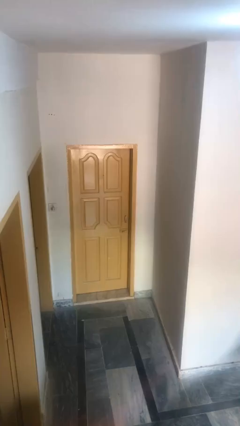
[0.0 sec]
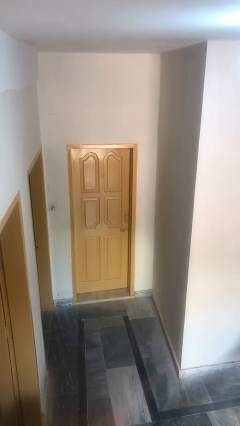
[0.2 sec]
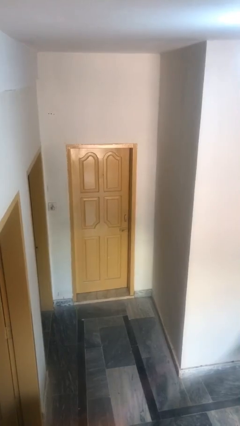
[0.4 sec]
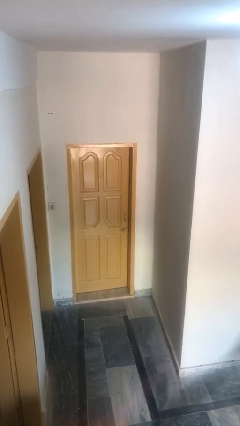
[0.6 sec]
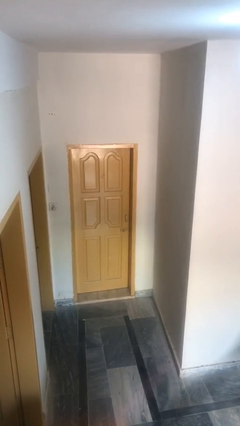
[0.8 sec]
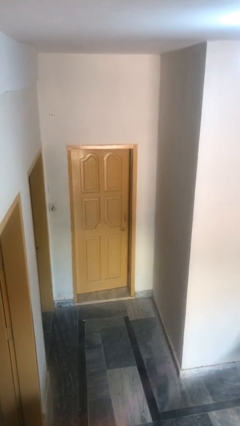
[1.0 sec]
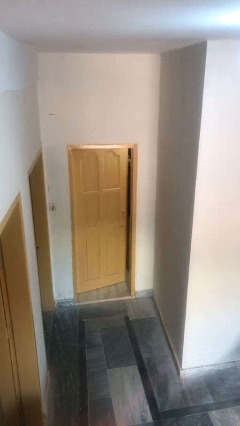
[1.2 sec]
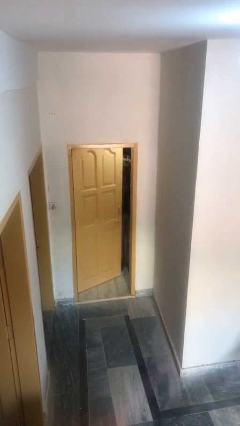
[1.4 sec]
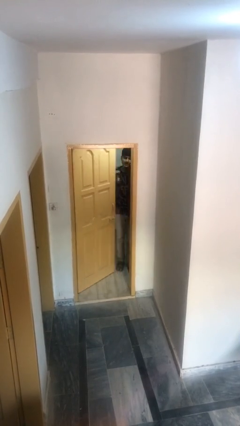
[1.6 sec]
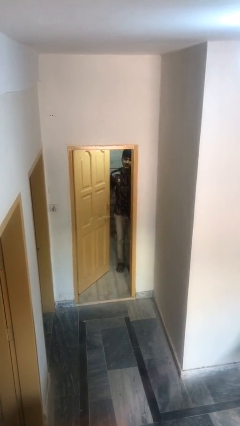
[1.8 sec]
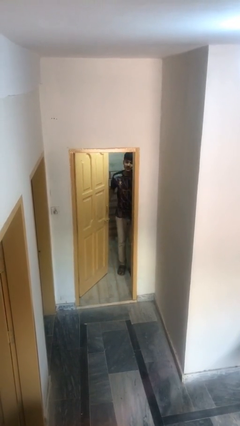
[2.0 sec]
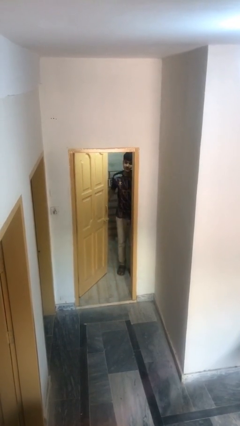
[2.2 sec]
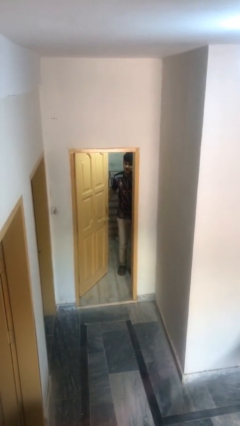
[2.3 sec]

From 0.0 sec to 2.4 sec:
person opens facility door

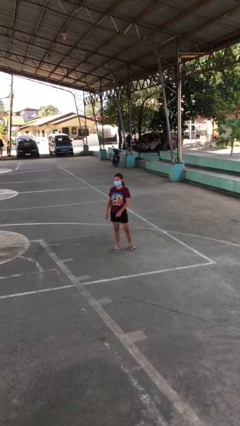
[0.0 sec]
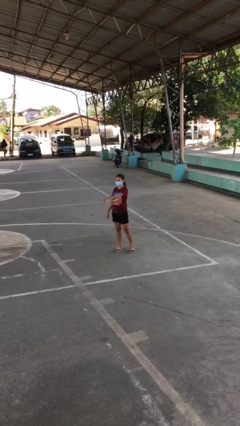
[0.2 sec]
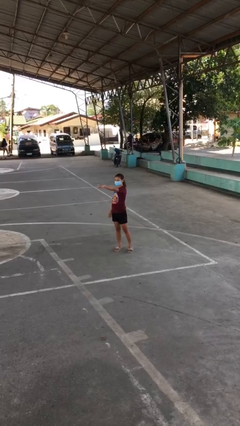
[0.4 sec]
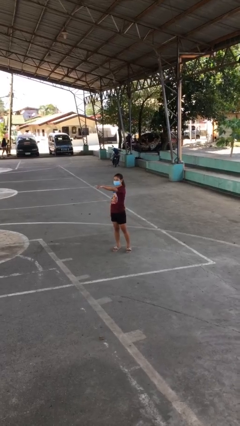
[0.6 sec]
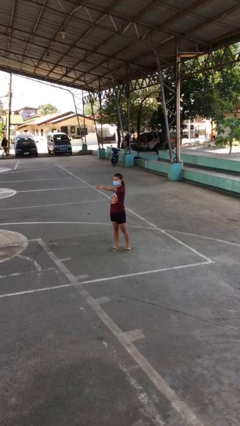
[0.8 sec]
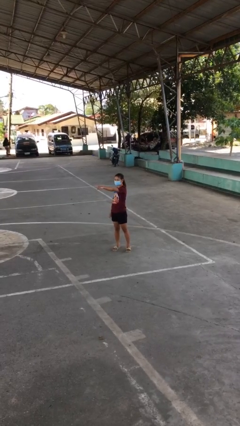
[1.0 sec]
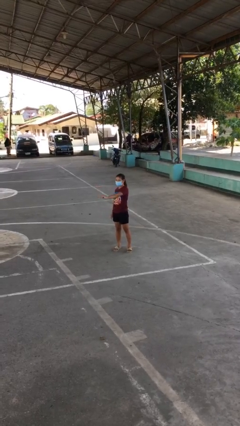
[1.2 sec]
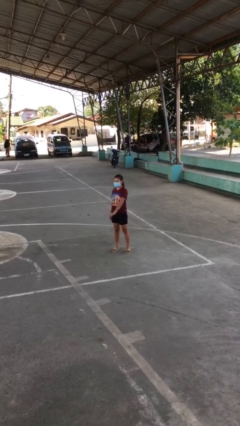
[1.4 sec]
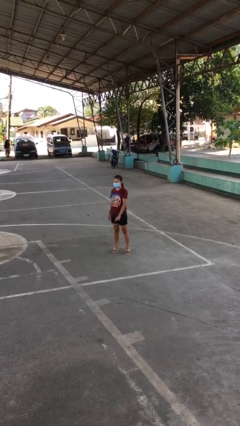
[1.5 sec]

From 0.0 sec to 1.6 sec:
person points at person

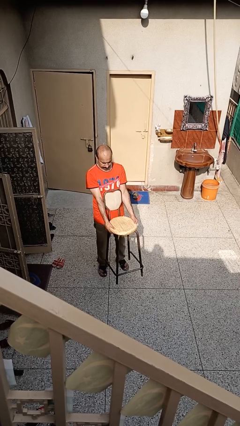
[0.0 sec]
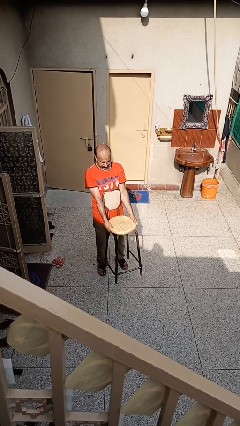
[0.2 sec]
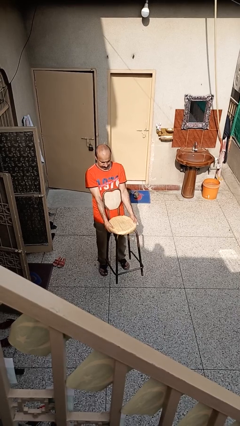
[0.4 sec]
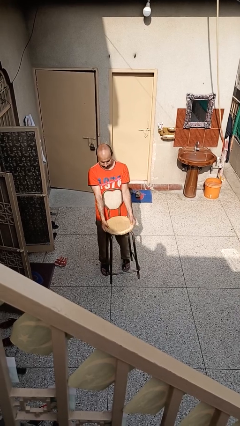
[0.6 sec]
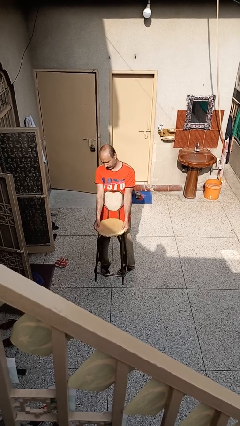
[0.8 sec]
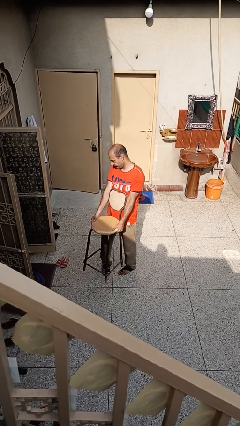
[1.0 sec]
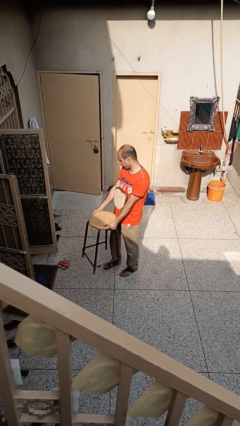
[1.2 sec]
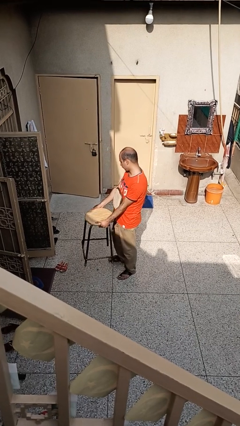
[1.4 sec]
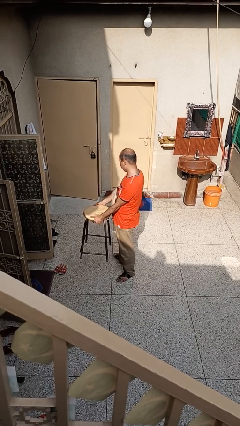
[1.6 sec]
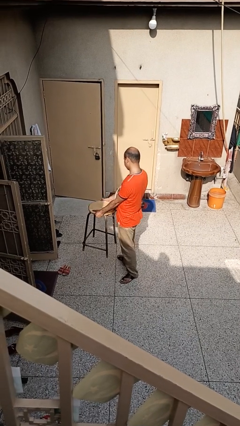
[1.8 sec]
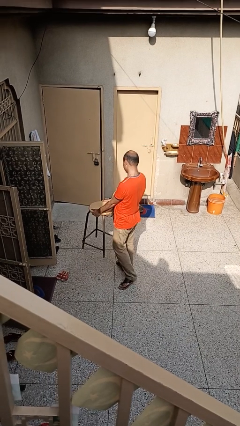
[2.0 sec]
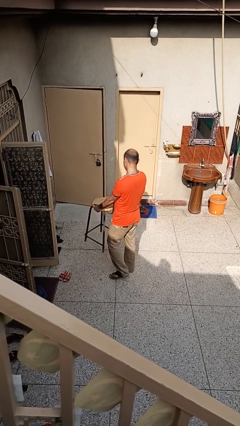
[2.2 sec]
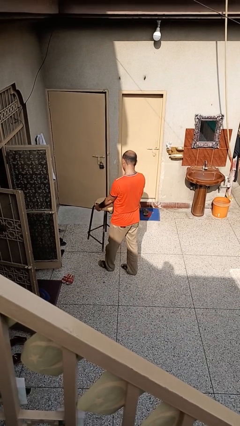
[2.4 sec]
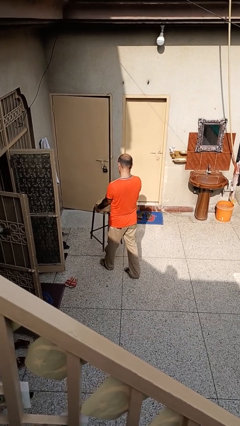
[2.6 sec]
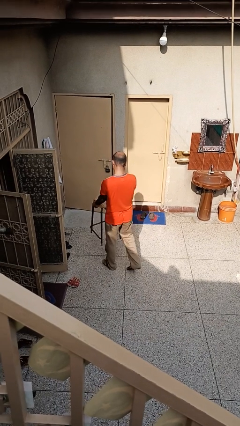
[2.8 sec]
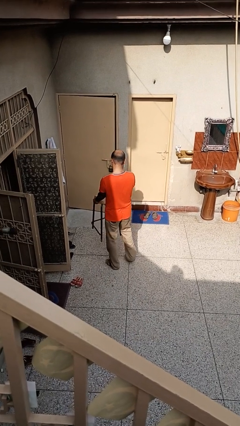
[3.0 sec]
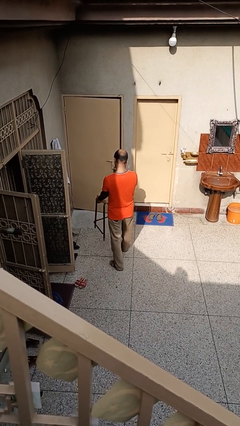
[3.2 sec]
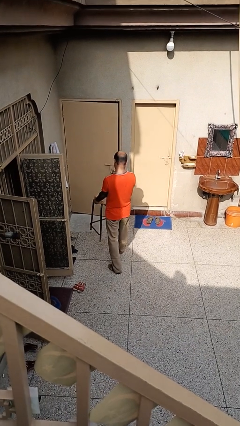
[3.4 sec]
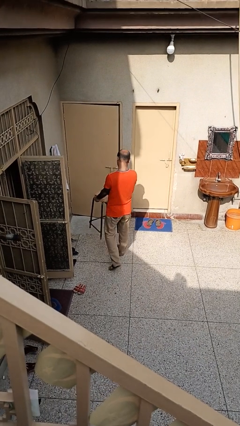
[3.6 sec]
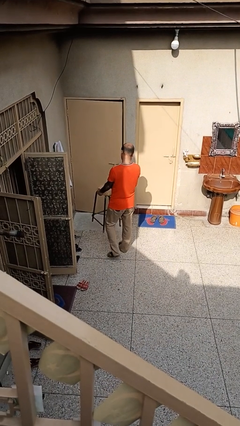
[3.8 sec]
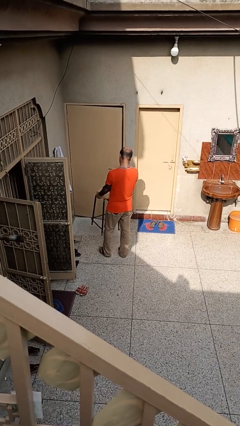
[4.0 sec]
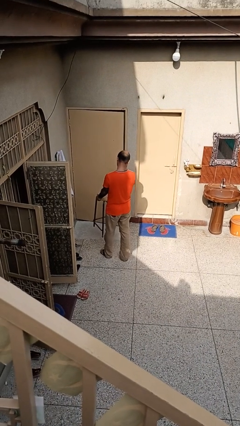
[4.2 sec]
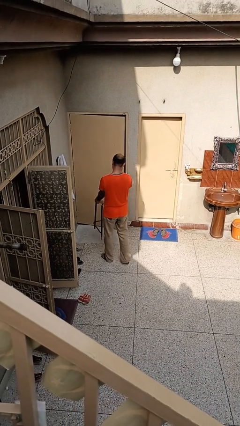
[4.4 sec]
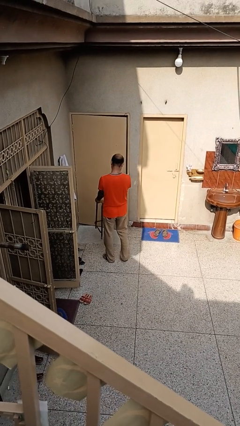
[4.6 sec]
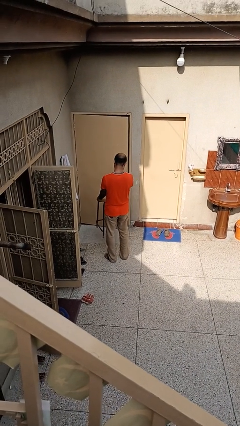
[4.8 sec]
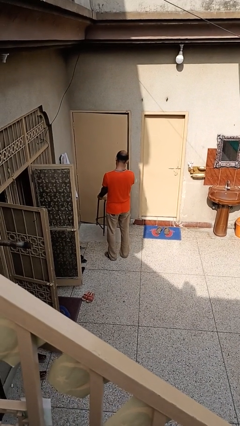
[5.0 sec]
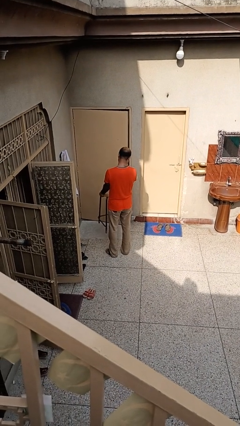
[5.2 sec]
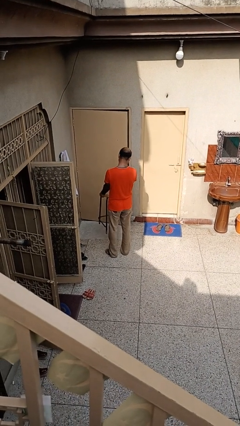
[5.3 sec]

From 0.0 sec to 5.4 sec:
person carries furniture

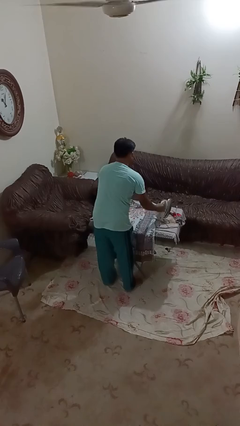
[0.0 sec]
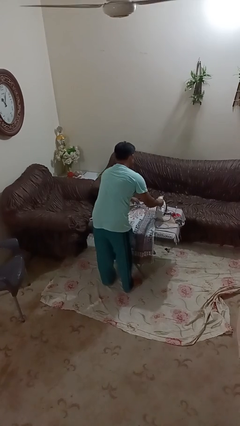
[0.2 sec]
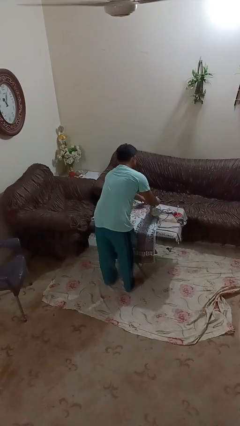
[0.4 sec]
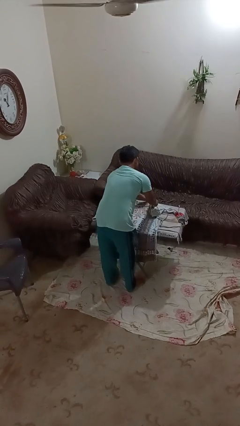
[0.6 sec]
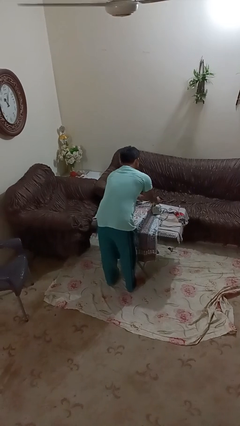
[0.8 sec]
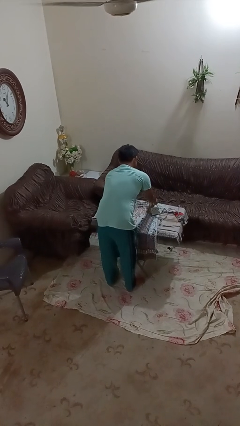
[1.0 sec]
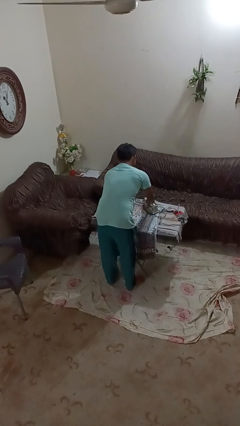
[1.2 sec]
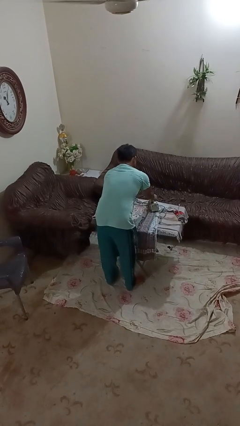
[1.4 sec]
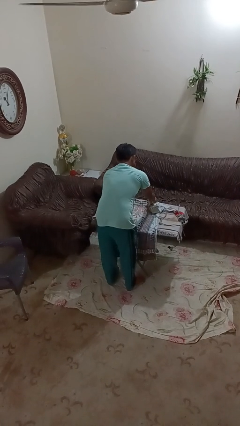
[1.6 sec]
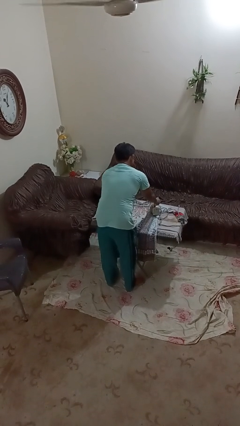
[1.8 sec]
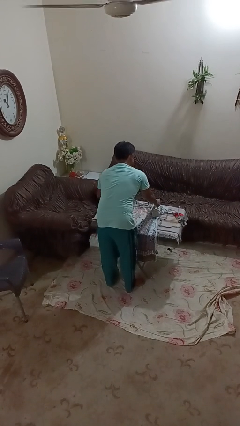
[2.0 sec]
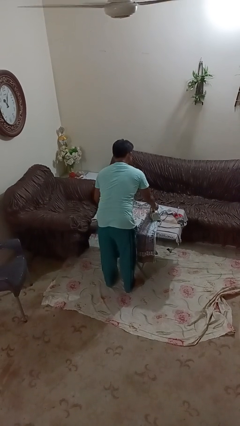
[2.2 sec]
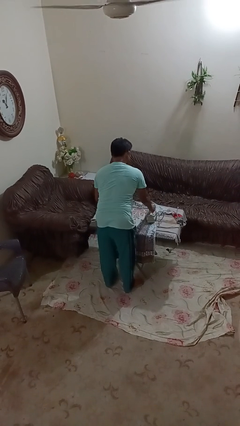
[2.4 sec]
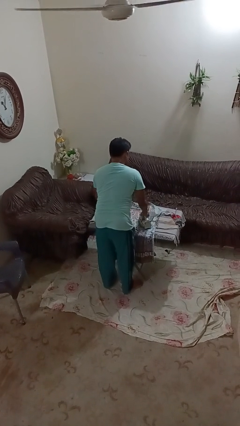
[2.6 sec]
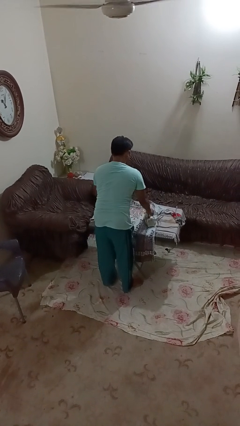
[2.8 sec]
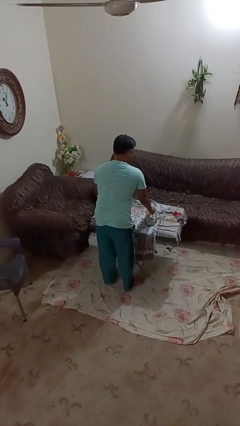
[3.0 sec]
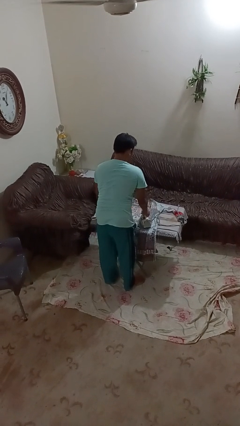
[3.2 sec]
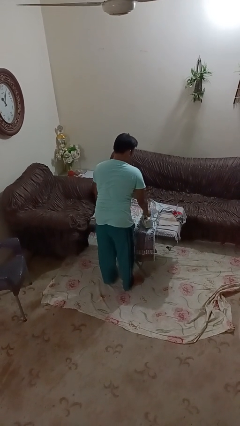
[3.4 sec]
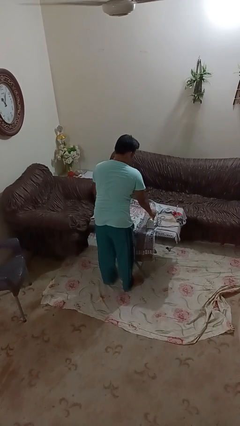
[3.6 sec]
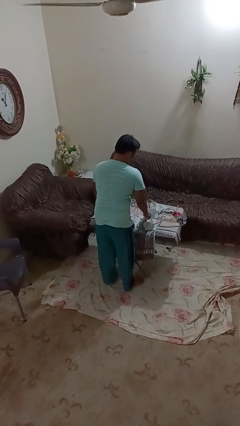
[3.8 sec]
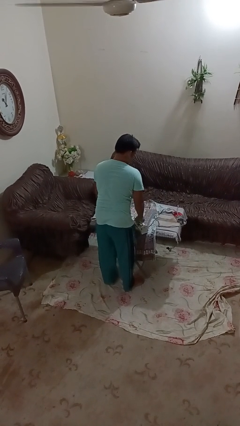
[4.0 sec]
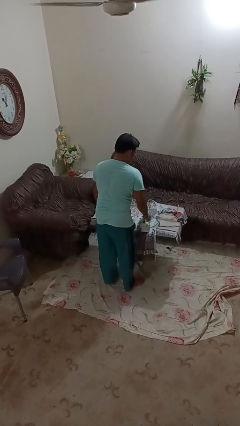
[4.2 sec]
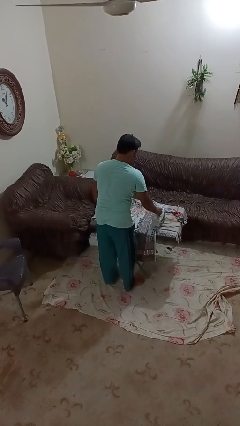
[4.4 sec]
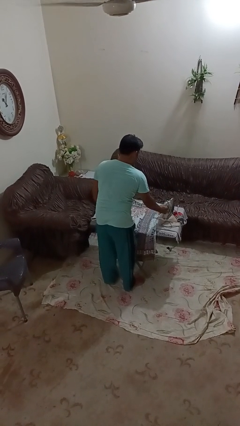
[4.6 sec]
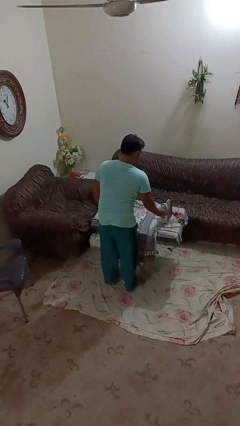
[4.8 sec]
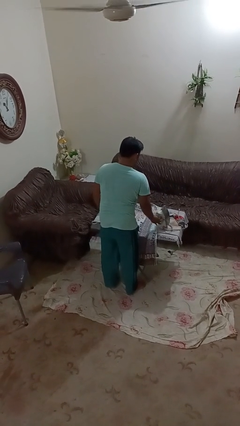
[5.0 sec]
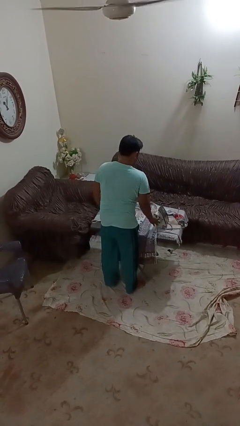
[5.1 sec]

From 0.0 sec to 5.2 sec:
person irons clothes

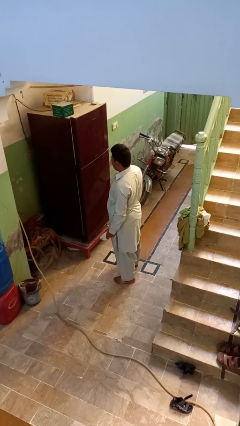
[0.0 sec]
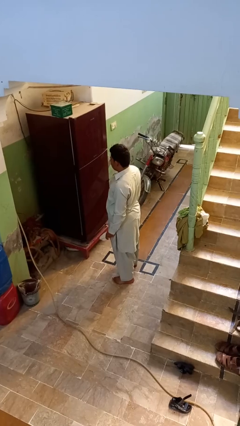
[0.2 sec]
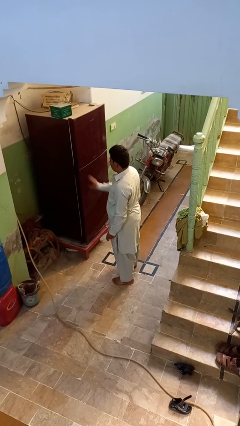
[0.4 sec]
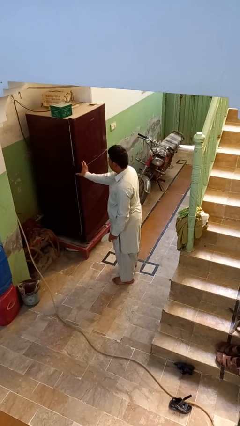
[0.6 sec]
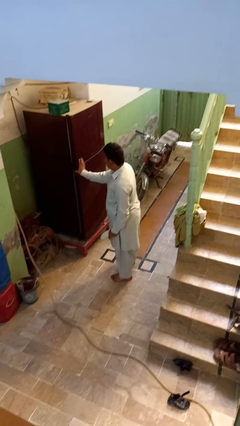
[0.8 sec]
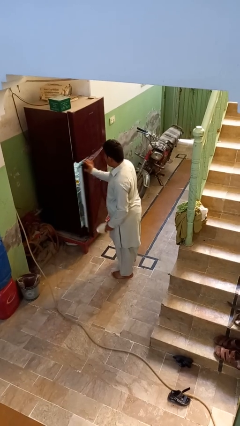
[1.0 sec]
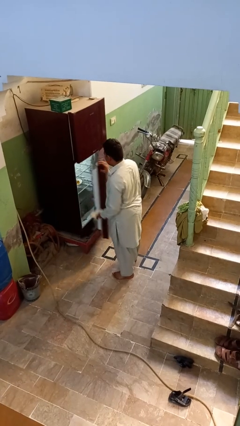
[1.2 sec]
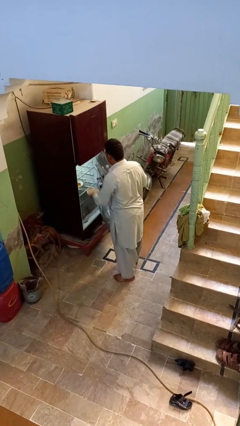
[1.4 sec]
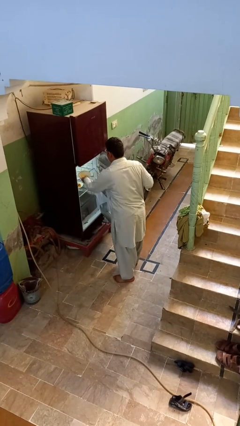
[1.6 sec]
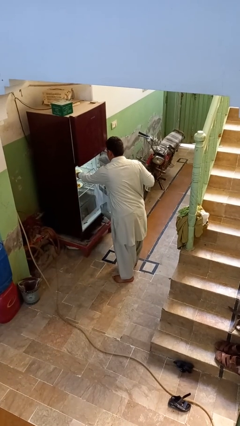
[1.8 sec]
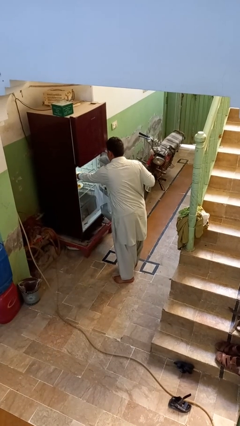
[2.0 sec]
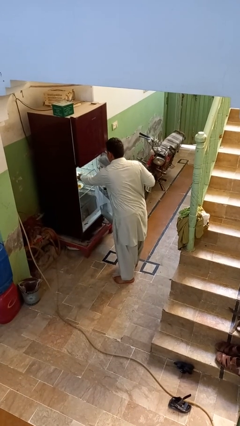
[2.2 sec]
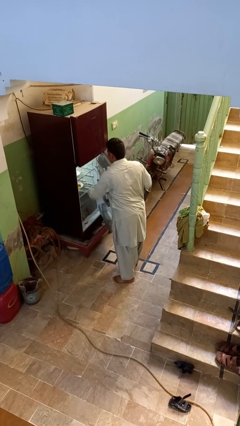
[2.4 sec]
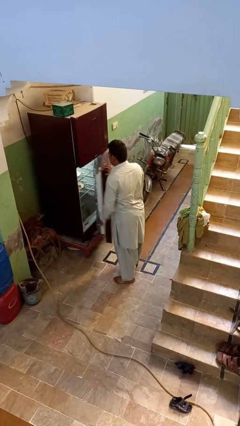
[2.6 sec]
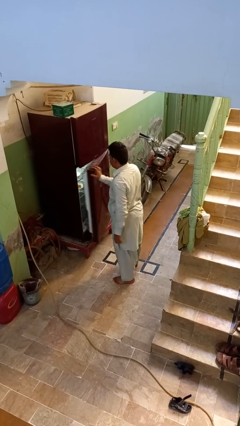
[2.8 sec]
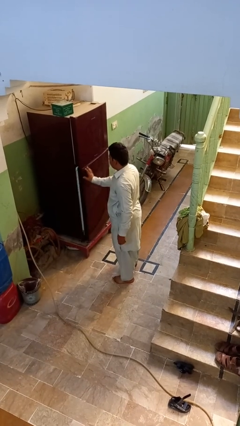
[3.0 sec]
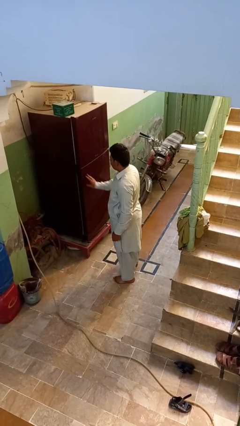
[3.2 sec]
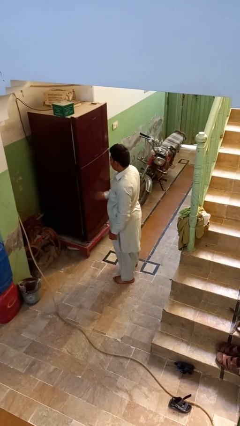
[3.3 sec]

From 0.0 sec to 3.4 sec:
person puts object into refrigerator
